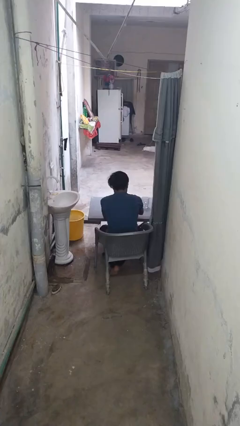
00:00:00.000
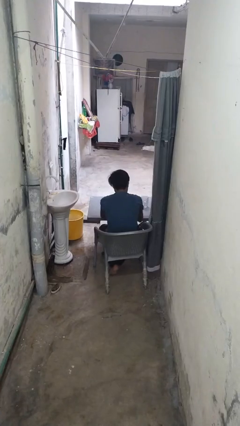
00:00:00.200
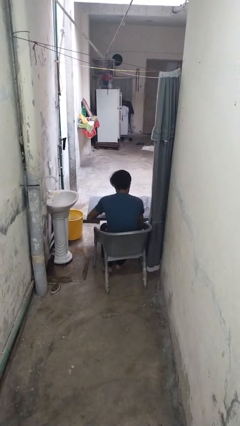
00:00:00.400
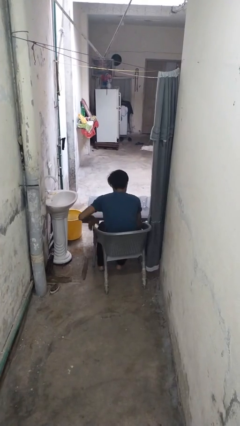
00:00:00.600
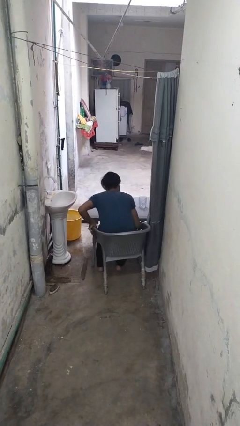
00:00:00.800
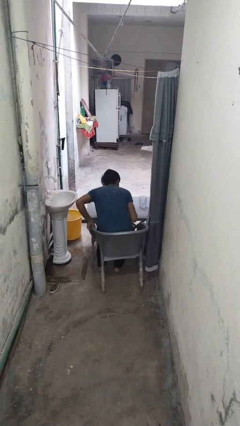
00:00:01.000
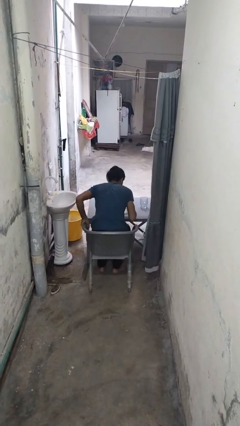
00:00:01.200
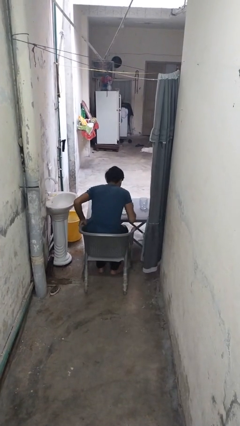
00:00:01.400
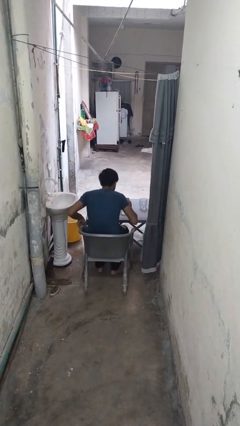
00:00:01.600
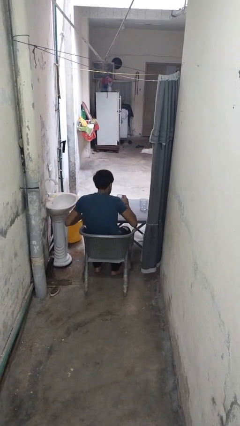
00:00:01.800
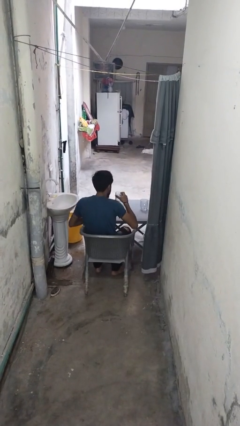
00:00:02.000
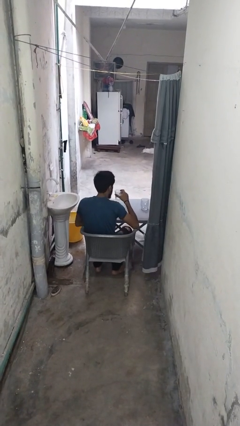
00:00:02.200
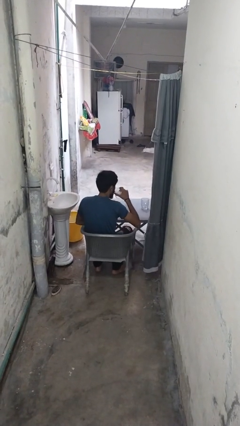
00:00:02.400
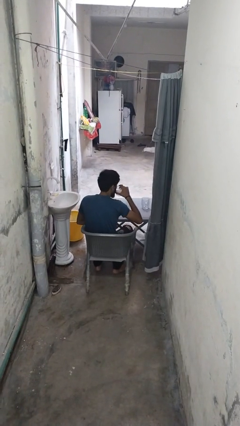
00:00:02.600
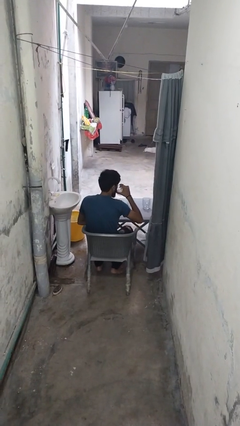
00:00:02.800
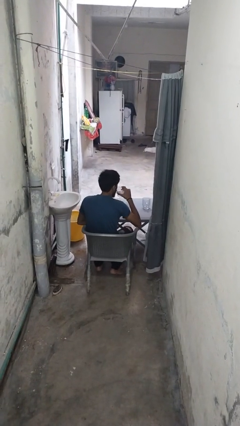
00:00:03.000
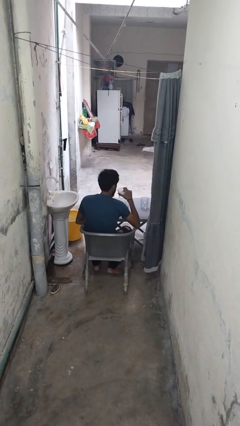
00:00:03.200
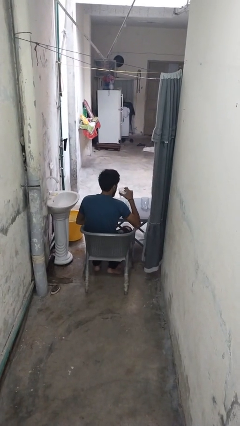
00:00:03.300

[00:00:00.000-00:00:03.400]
person picks up object from table

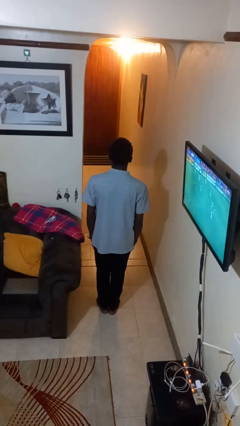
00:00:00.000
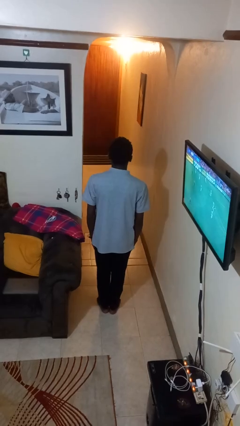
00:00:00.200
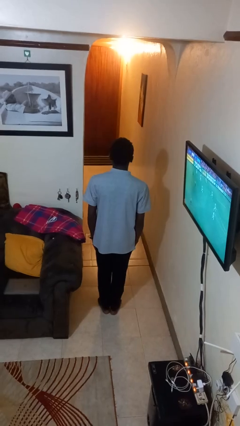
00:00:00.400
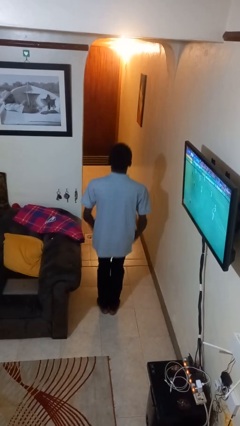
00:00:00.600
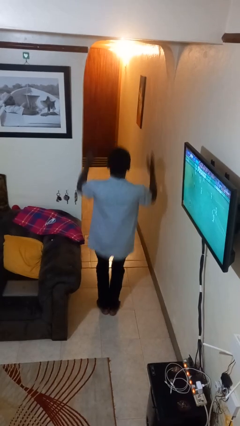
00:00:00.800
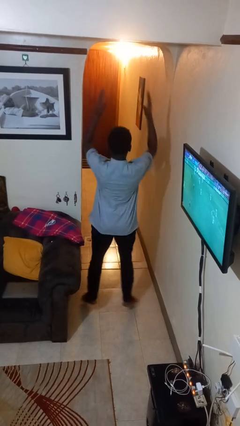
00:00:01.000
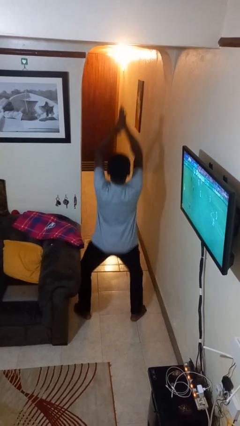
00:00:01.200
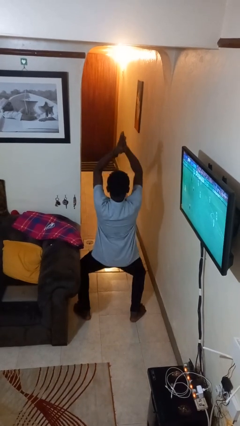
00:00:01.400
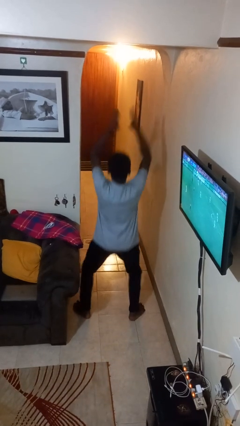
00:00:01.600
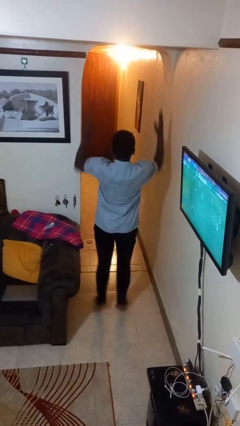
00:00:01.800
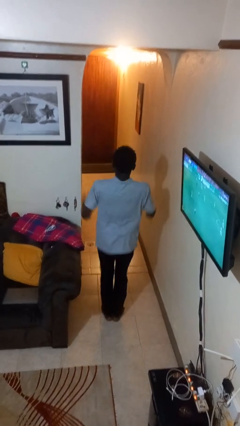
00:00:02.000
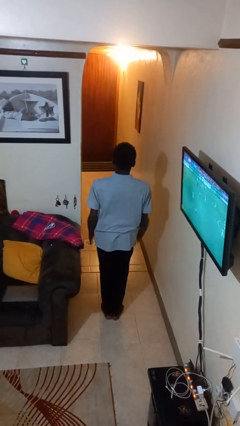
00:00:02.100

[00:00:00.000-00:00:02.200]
person exercises with jumping jacks

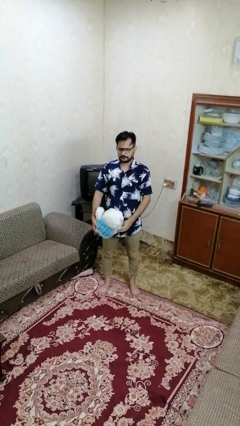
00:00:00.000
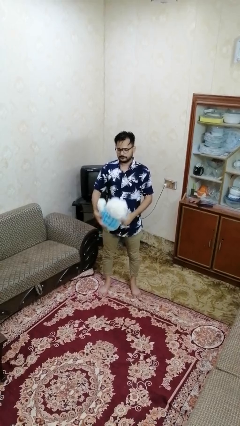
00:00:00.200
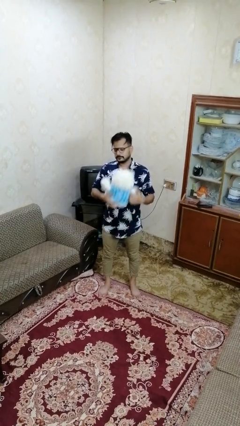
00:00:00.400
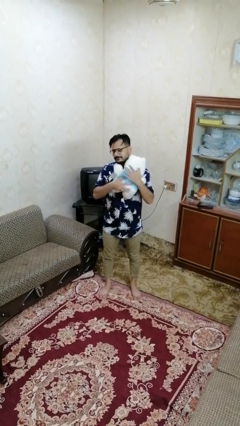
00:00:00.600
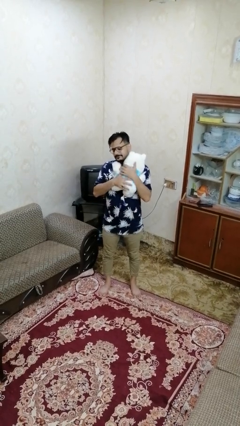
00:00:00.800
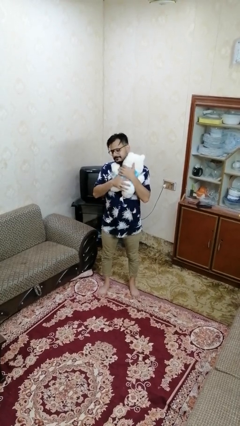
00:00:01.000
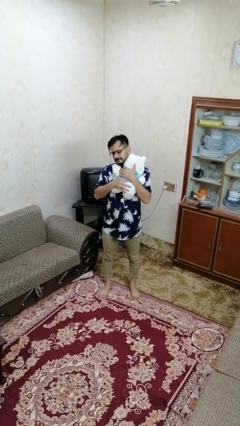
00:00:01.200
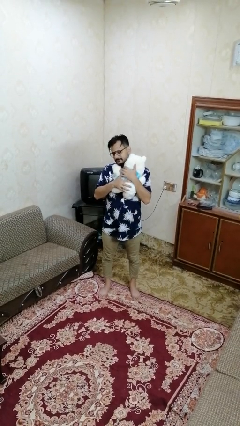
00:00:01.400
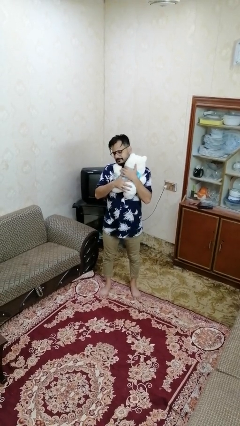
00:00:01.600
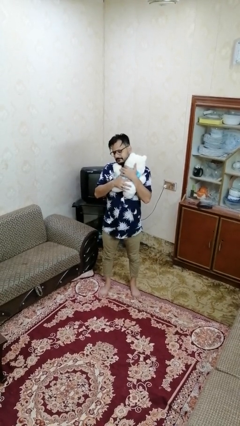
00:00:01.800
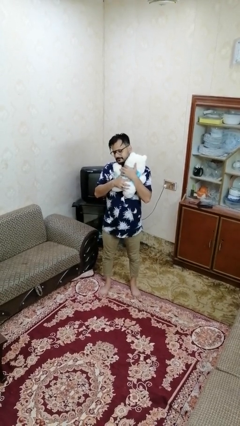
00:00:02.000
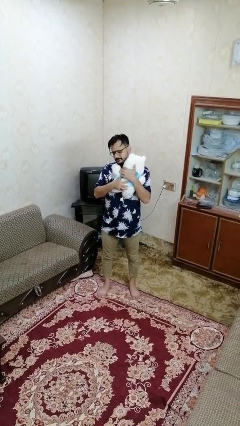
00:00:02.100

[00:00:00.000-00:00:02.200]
person hugs stuffed animal

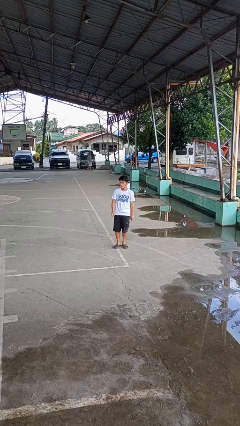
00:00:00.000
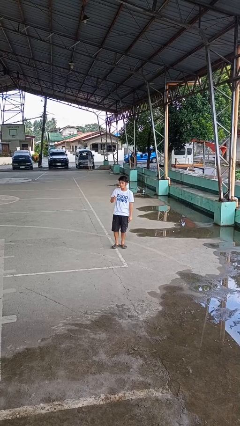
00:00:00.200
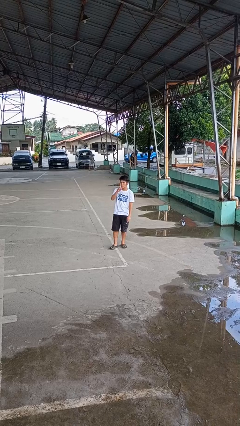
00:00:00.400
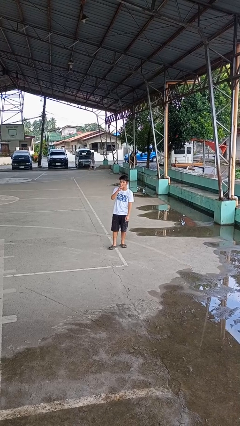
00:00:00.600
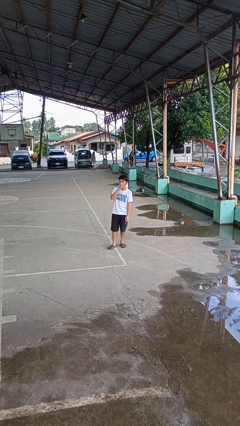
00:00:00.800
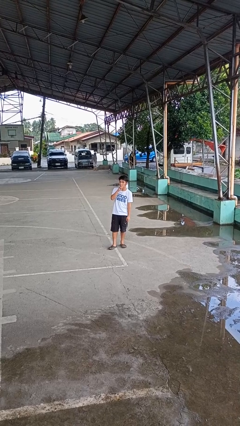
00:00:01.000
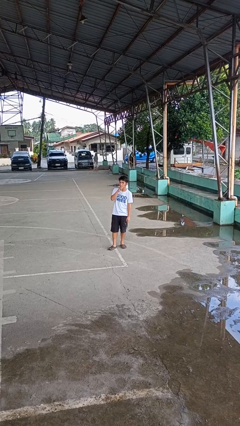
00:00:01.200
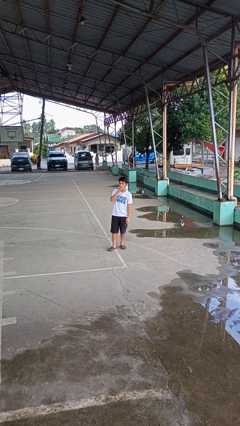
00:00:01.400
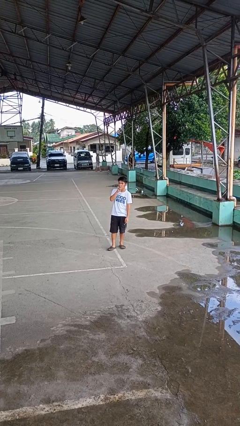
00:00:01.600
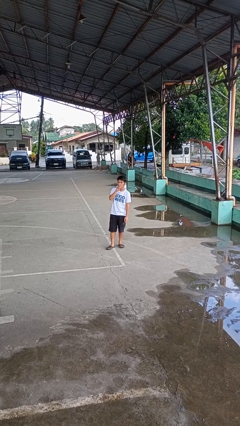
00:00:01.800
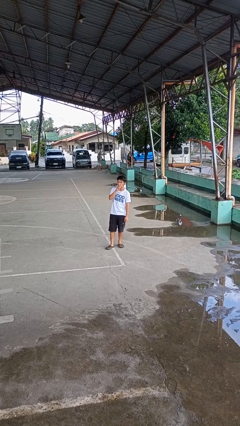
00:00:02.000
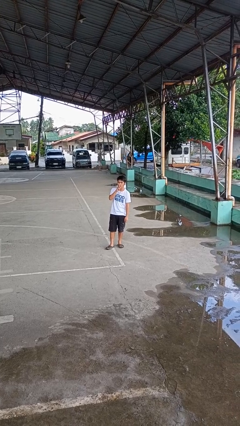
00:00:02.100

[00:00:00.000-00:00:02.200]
person gestures be quiet

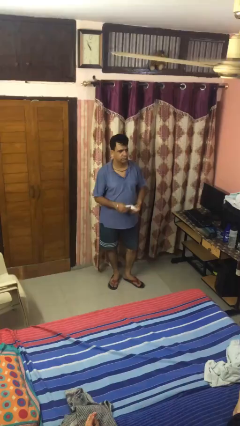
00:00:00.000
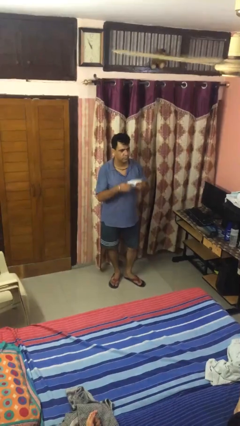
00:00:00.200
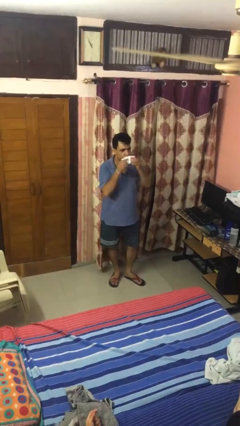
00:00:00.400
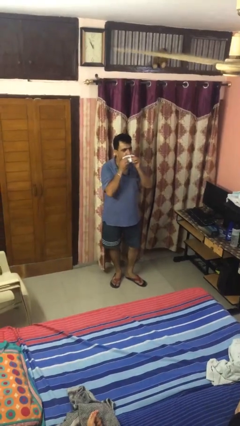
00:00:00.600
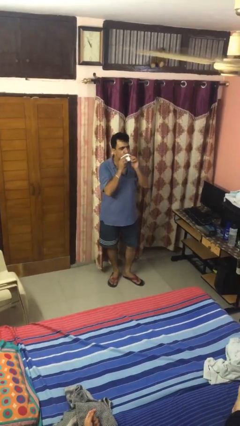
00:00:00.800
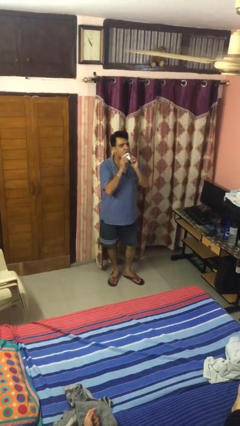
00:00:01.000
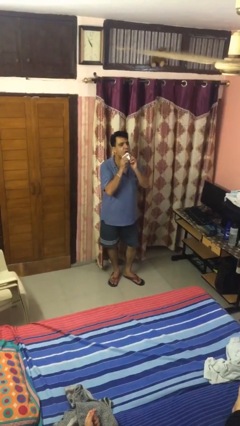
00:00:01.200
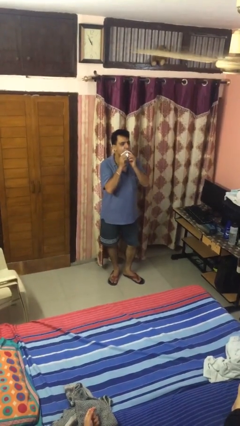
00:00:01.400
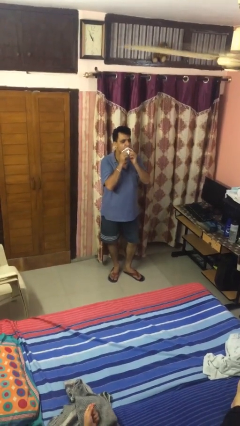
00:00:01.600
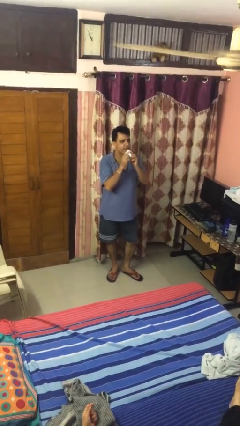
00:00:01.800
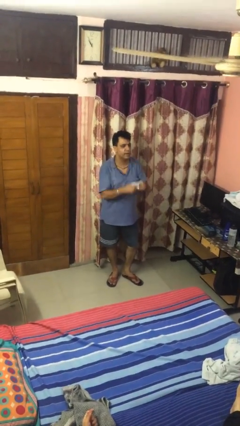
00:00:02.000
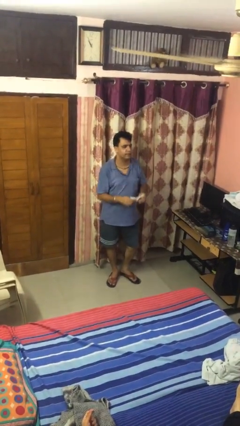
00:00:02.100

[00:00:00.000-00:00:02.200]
person wipes mouth with napkin

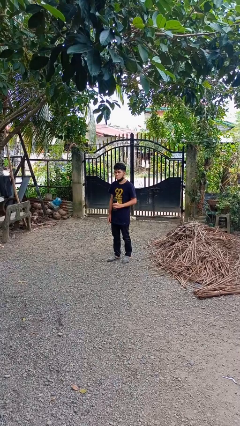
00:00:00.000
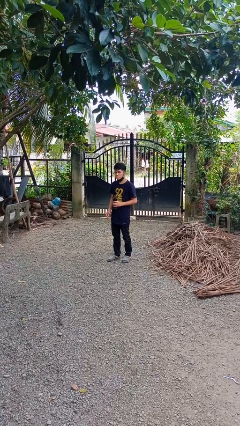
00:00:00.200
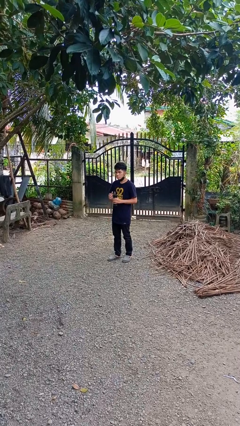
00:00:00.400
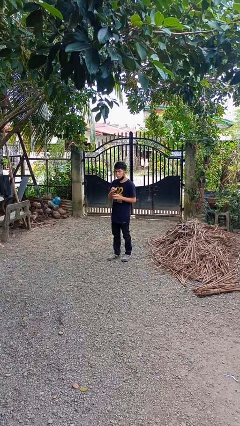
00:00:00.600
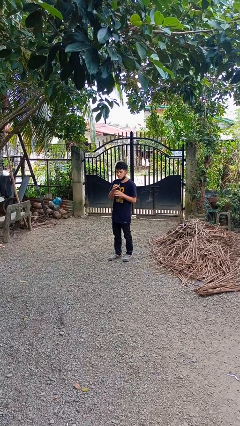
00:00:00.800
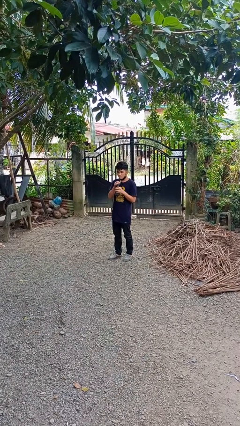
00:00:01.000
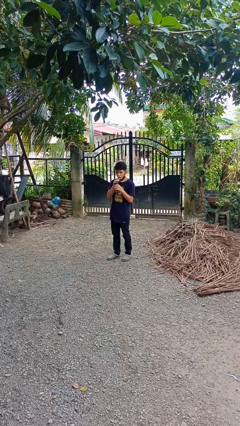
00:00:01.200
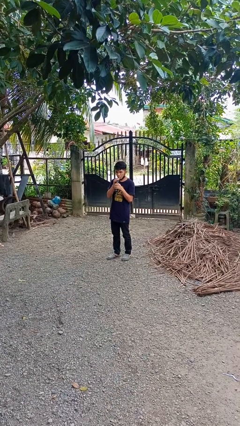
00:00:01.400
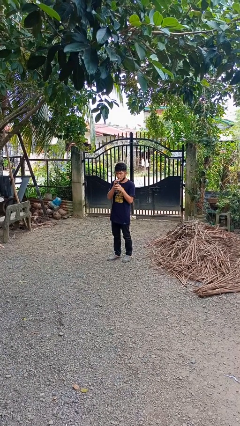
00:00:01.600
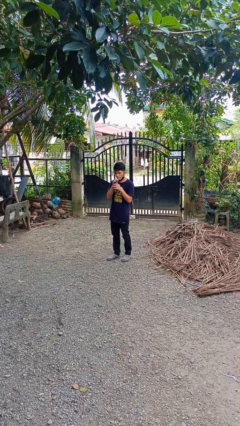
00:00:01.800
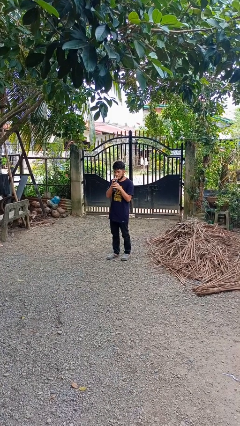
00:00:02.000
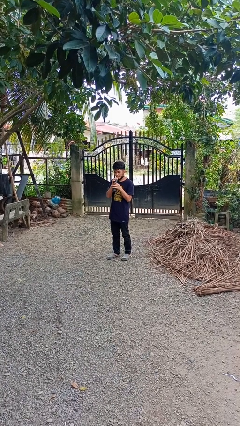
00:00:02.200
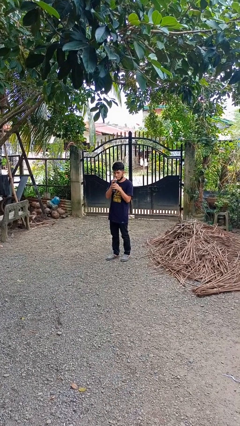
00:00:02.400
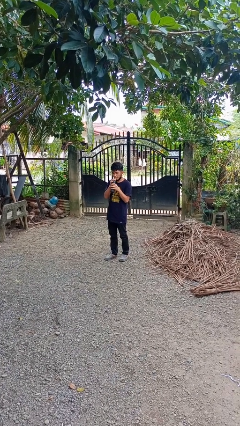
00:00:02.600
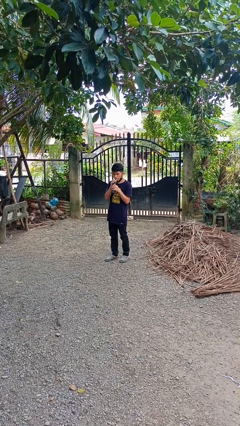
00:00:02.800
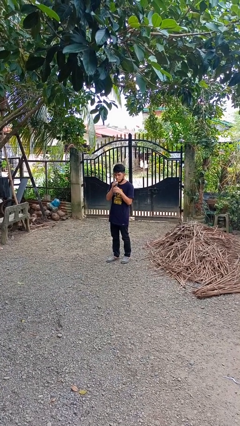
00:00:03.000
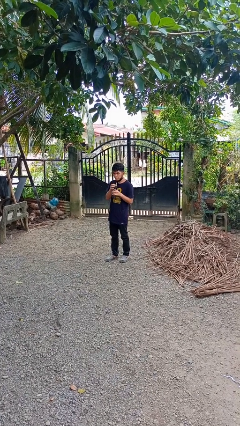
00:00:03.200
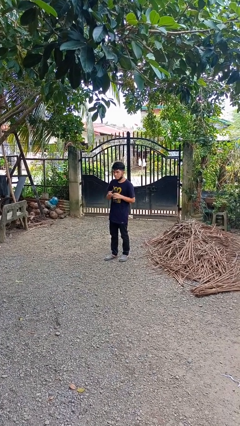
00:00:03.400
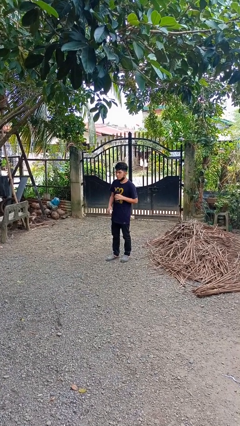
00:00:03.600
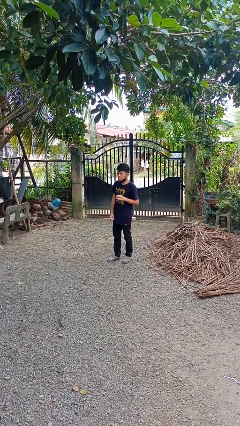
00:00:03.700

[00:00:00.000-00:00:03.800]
person drinks from straw

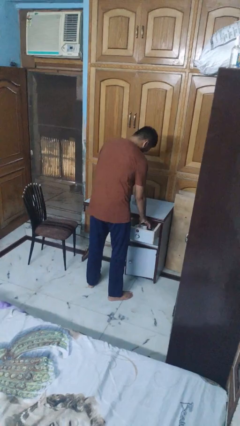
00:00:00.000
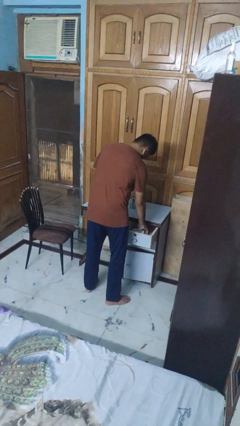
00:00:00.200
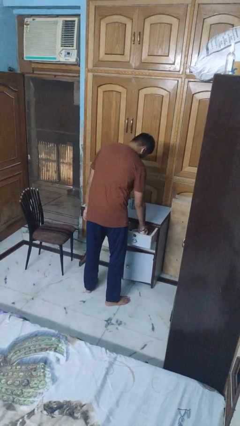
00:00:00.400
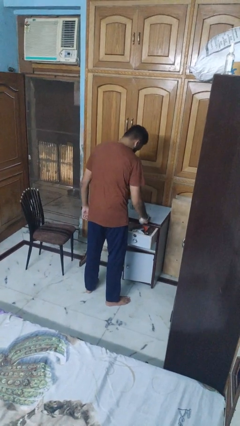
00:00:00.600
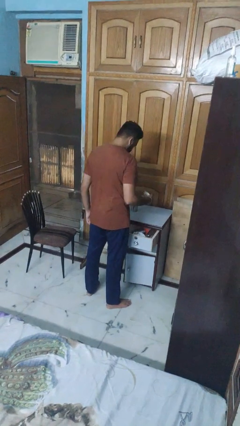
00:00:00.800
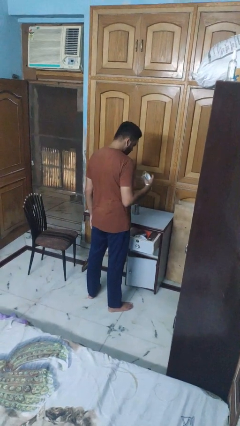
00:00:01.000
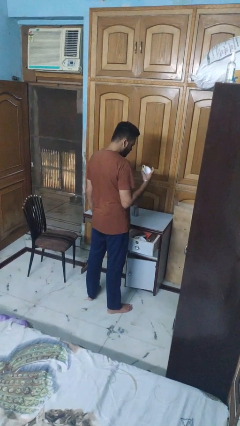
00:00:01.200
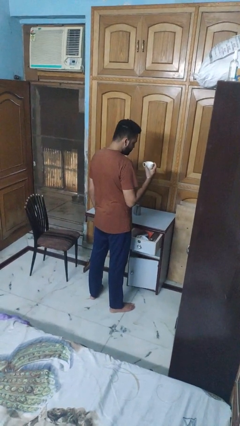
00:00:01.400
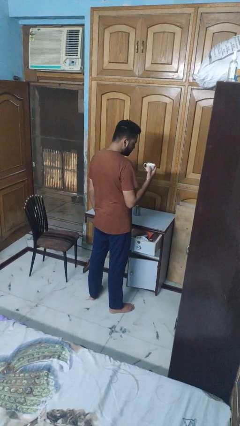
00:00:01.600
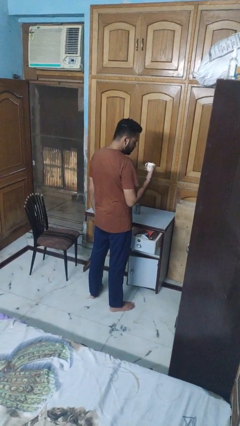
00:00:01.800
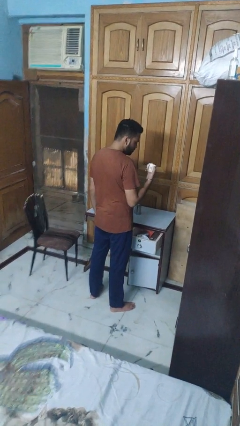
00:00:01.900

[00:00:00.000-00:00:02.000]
person takes object from kitchen drawer
